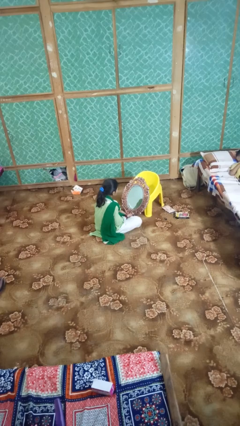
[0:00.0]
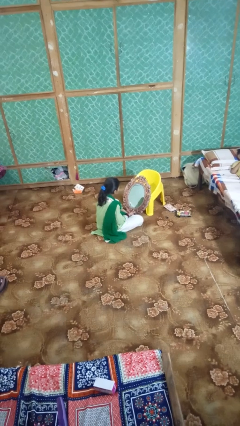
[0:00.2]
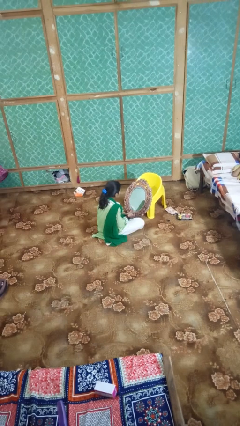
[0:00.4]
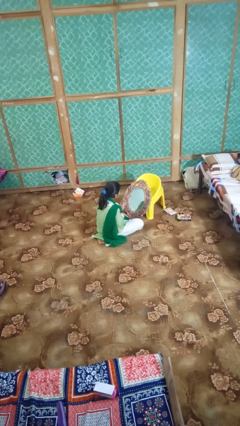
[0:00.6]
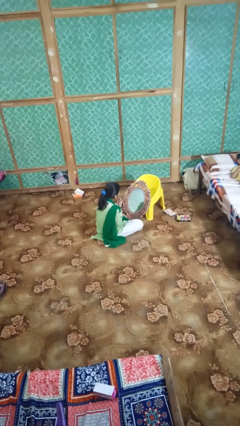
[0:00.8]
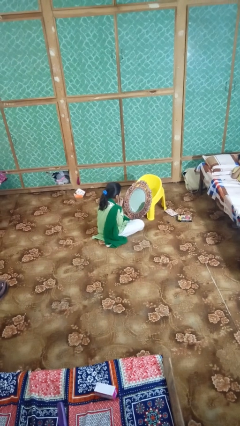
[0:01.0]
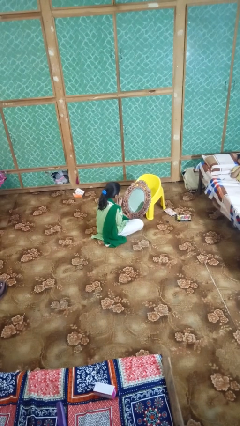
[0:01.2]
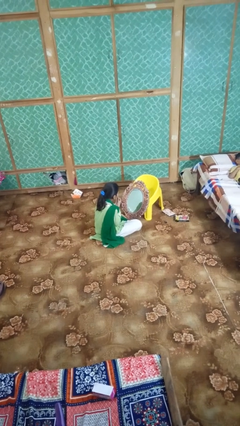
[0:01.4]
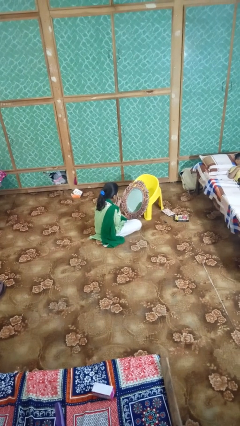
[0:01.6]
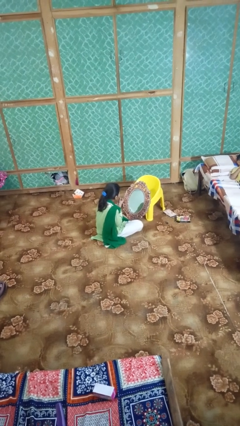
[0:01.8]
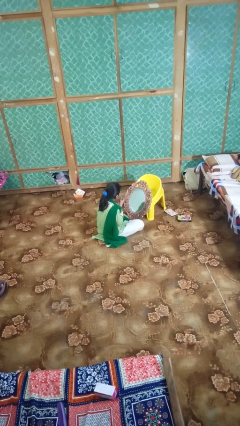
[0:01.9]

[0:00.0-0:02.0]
person applies lip makeup

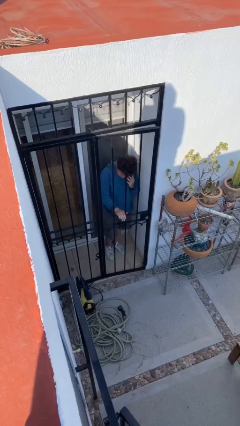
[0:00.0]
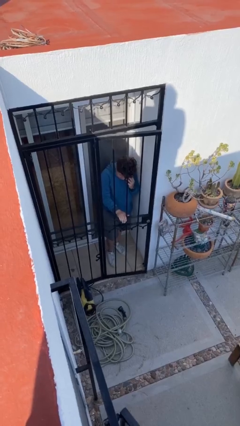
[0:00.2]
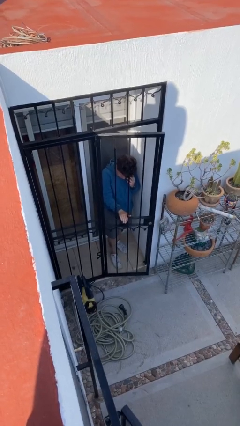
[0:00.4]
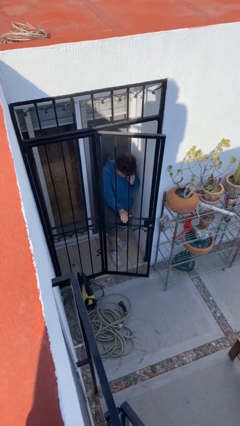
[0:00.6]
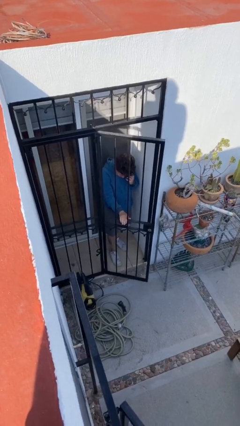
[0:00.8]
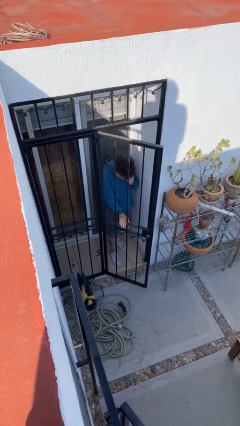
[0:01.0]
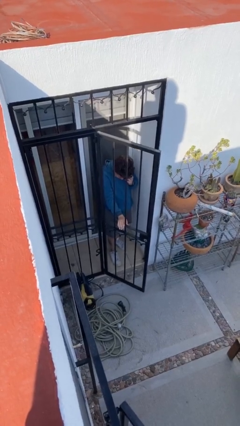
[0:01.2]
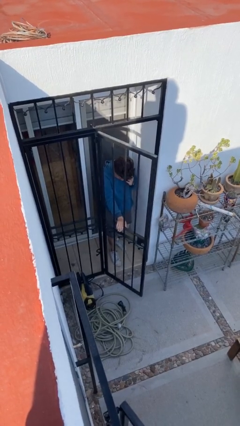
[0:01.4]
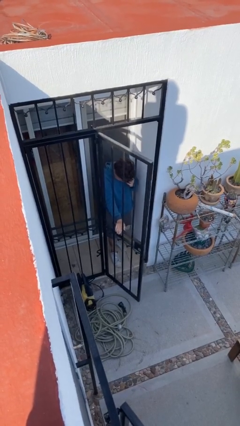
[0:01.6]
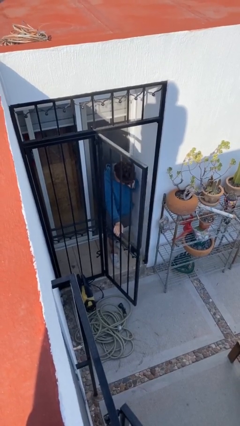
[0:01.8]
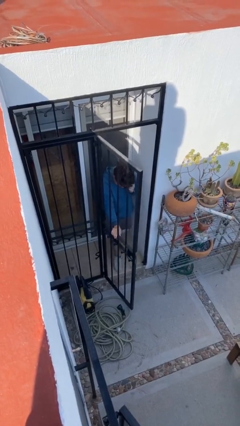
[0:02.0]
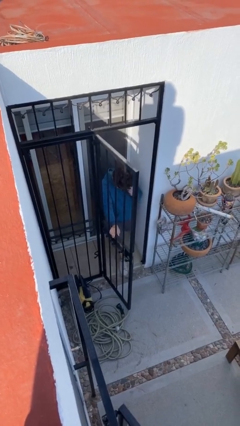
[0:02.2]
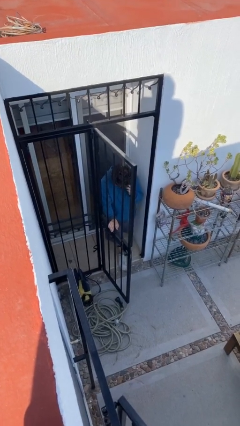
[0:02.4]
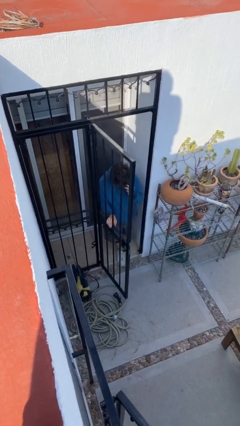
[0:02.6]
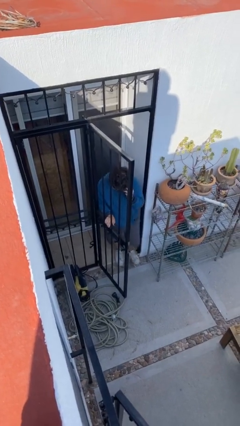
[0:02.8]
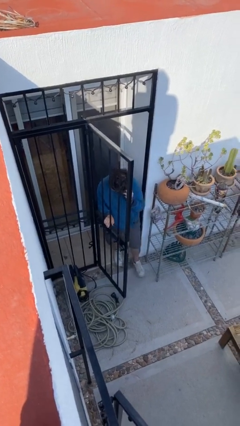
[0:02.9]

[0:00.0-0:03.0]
person opens facility door

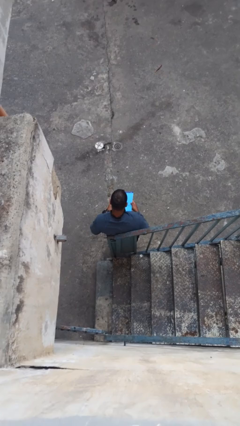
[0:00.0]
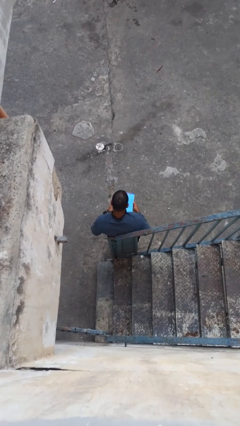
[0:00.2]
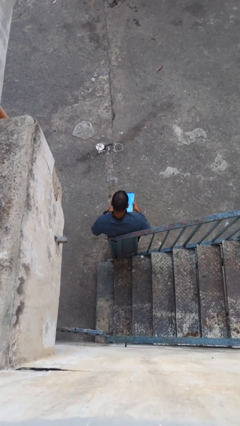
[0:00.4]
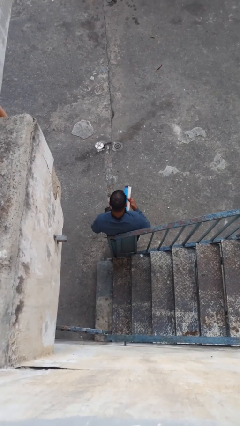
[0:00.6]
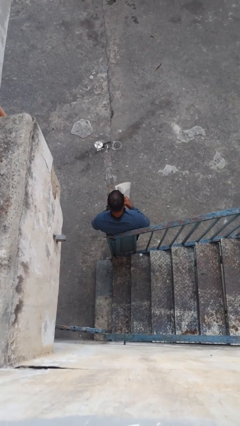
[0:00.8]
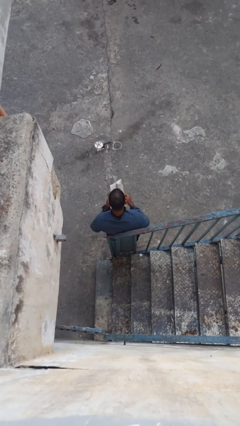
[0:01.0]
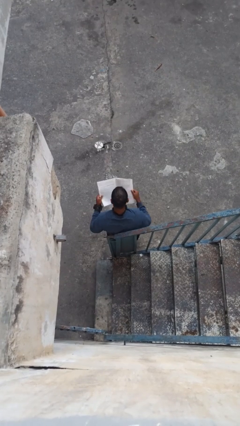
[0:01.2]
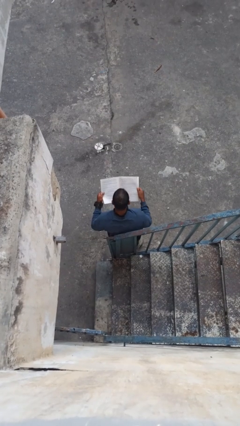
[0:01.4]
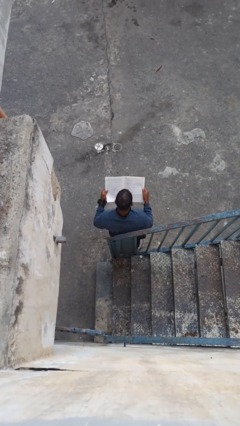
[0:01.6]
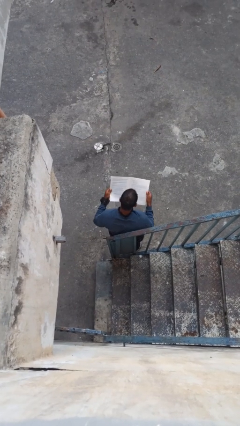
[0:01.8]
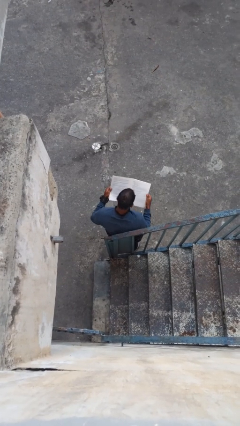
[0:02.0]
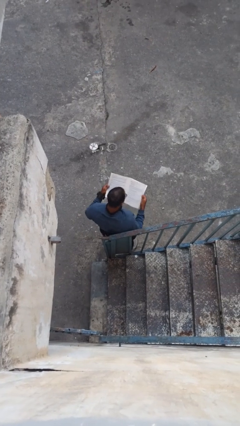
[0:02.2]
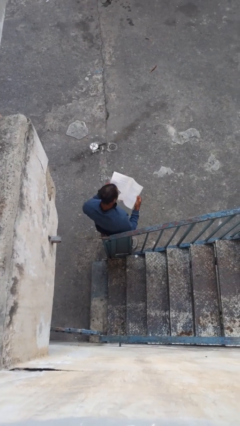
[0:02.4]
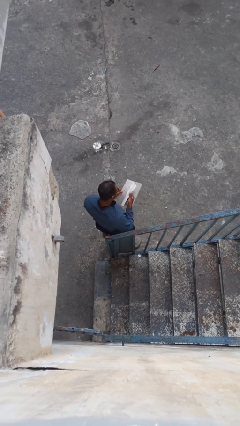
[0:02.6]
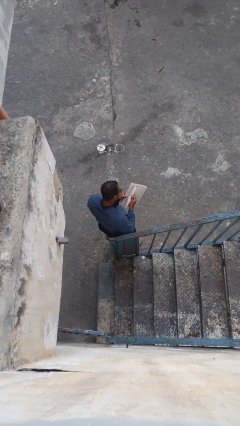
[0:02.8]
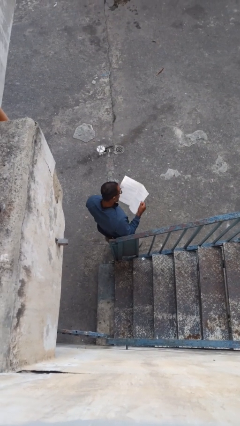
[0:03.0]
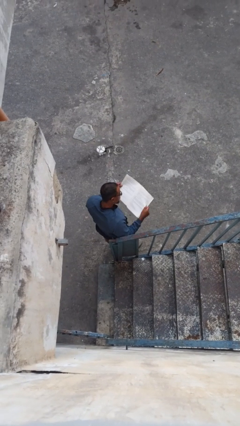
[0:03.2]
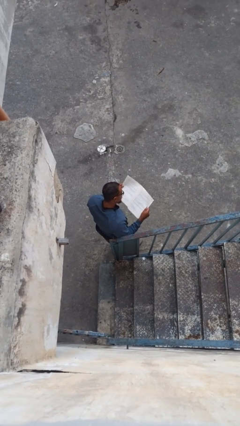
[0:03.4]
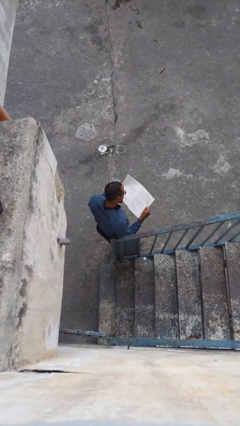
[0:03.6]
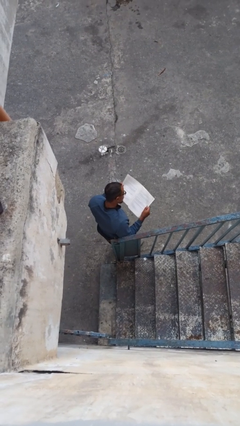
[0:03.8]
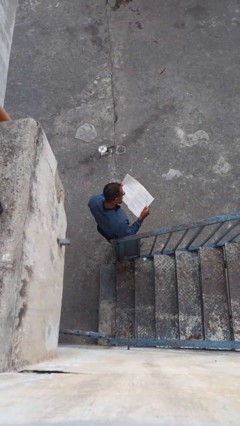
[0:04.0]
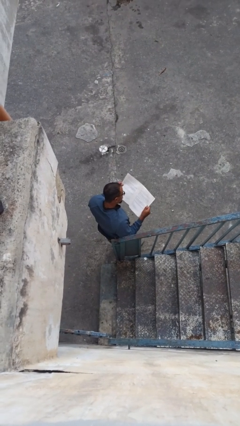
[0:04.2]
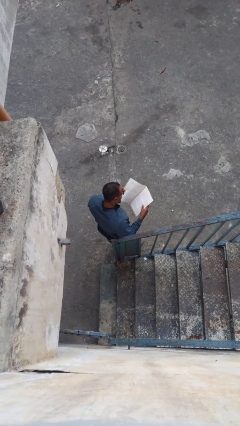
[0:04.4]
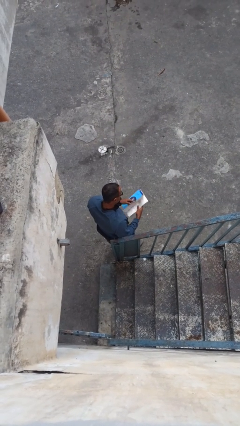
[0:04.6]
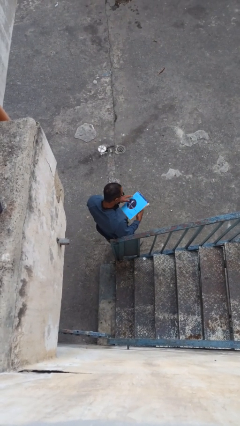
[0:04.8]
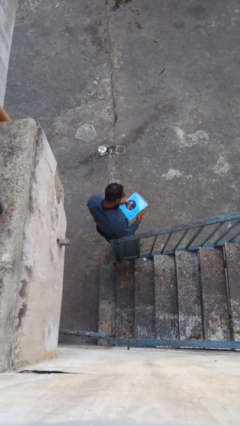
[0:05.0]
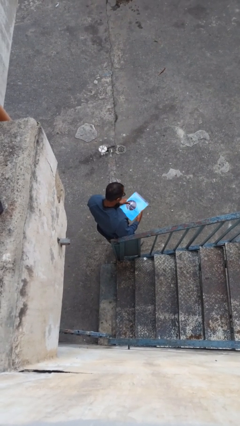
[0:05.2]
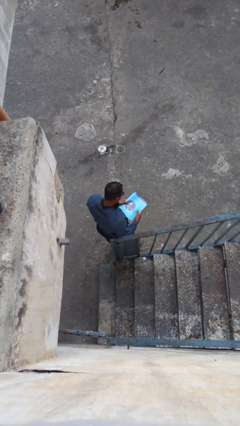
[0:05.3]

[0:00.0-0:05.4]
person reads document

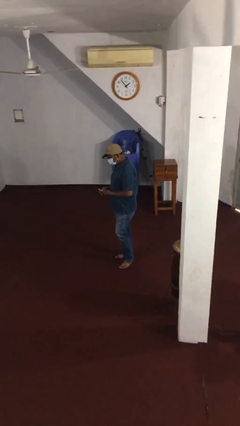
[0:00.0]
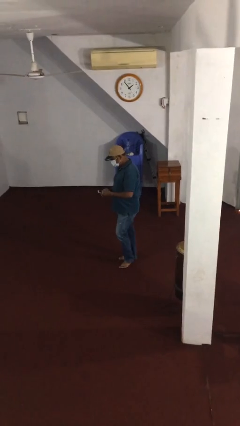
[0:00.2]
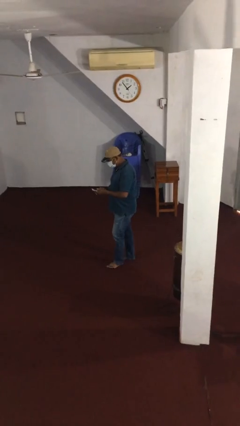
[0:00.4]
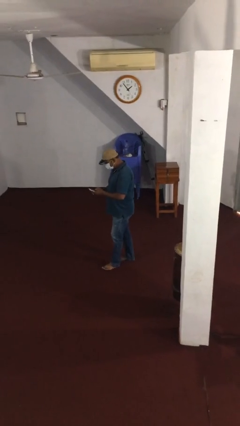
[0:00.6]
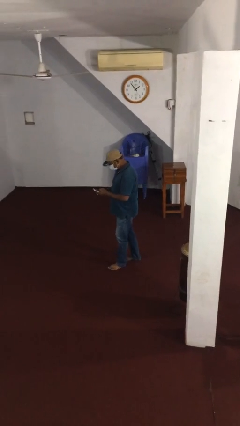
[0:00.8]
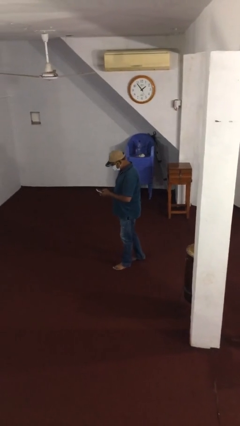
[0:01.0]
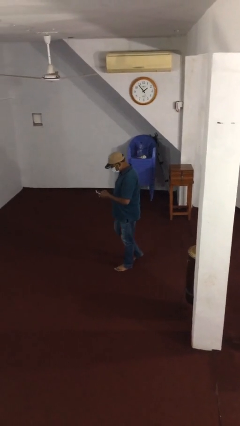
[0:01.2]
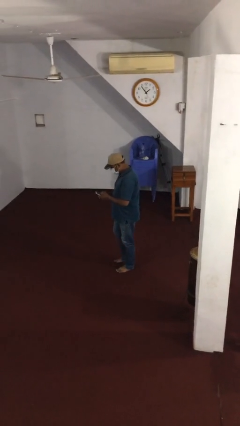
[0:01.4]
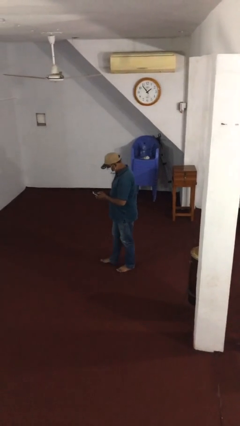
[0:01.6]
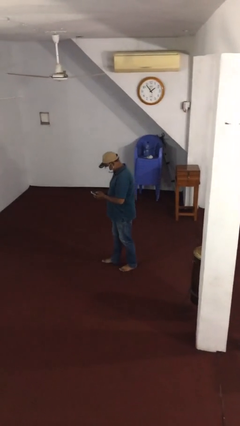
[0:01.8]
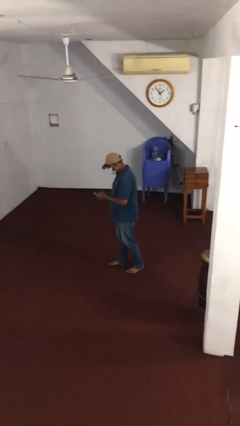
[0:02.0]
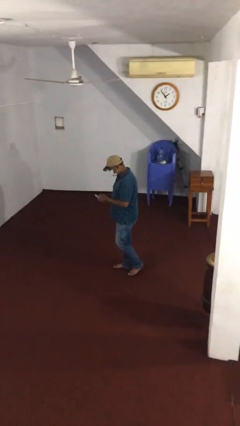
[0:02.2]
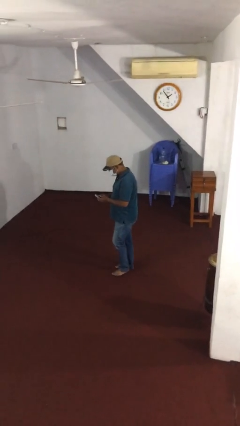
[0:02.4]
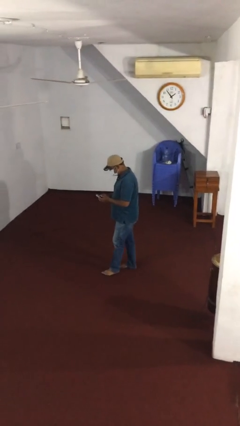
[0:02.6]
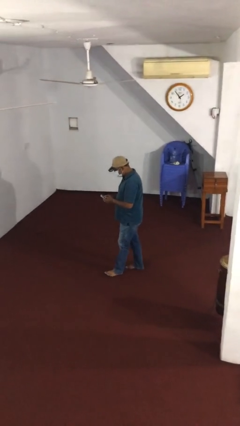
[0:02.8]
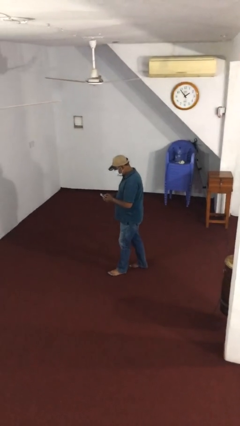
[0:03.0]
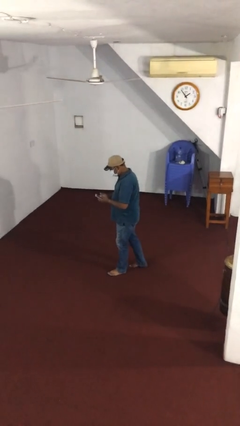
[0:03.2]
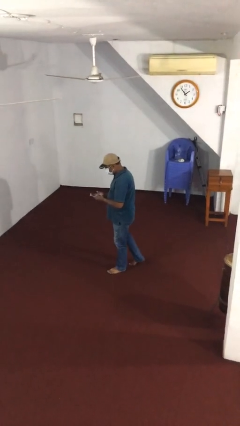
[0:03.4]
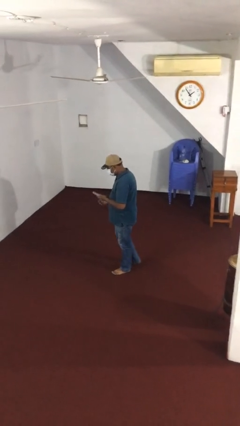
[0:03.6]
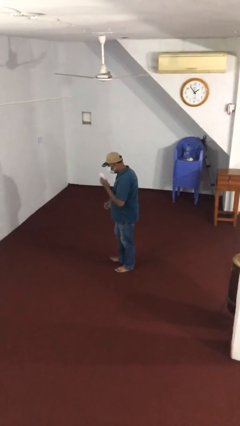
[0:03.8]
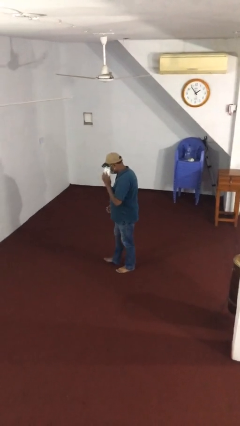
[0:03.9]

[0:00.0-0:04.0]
person texts on phone

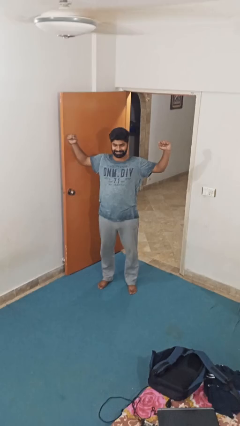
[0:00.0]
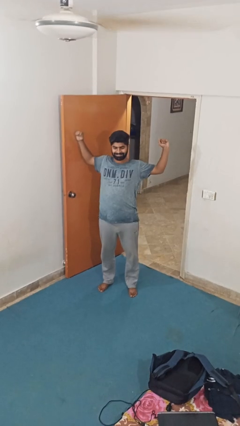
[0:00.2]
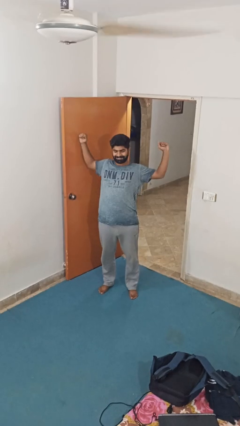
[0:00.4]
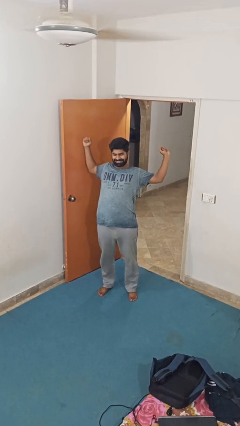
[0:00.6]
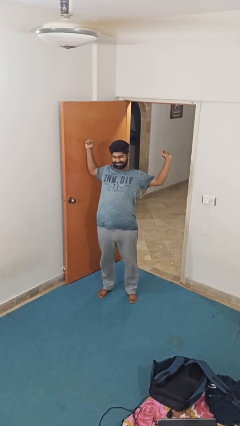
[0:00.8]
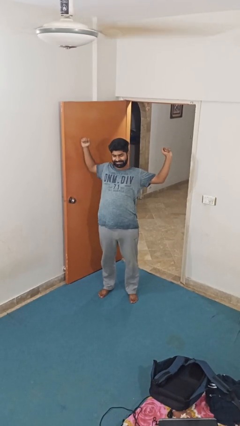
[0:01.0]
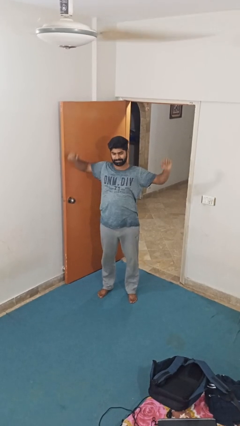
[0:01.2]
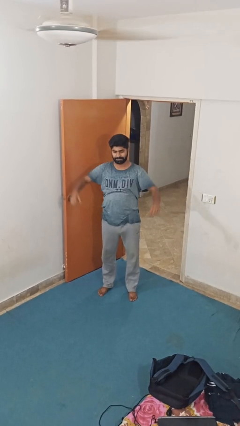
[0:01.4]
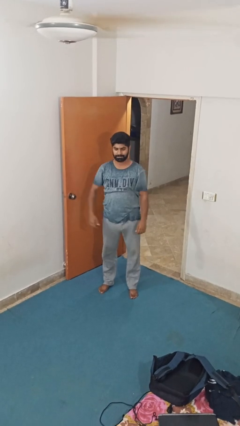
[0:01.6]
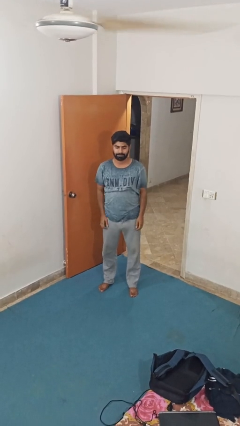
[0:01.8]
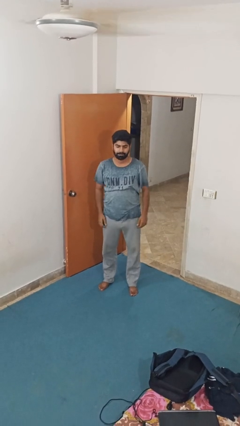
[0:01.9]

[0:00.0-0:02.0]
person stretches arms to side

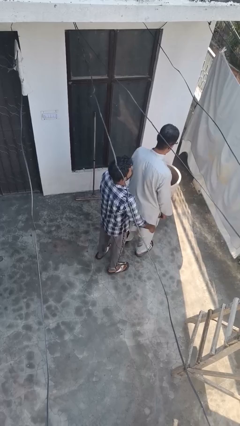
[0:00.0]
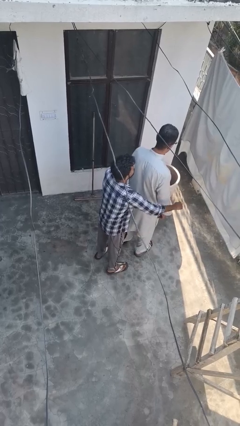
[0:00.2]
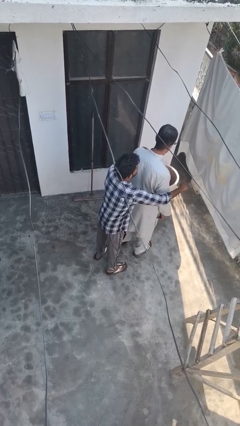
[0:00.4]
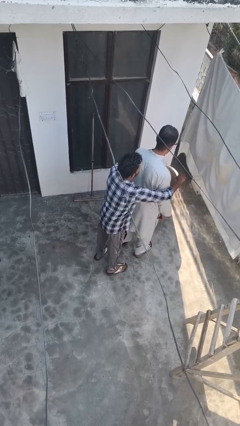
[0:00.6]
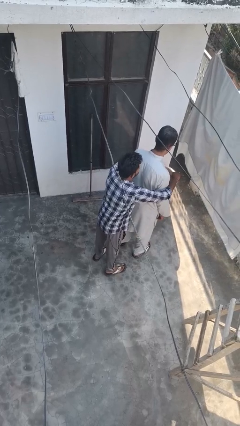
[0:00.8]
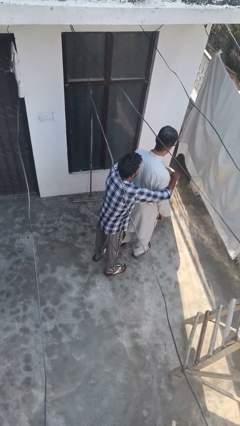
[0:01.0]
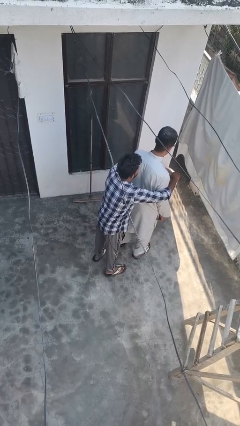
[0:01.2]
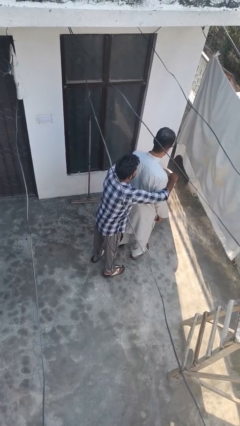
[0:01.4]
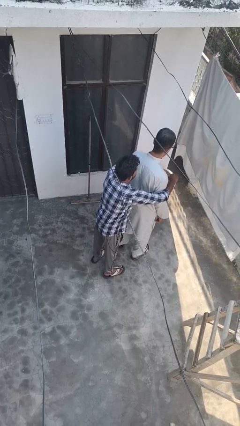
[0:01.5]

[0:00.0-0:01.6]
person hugs person from behind
